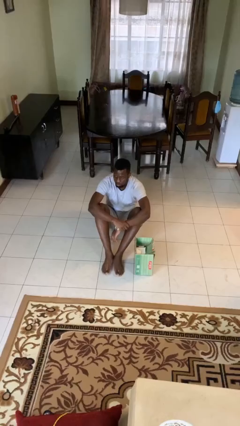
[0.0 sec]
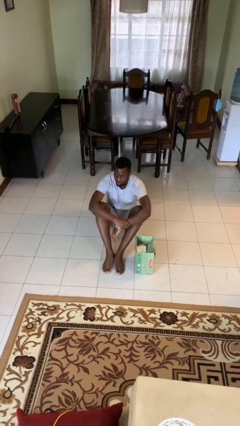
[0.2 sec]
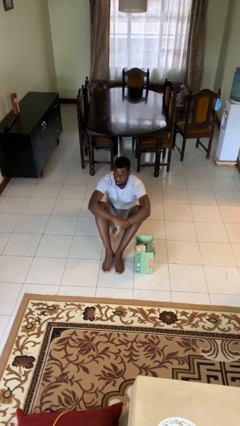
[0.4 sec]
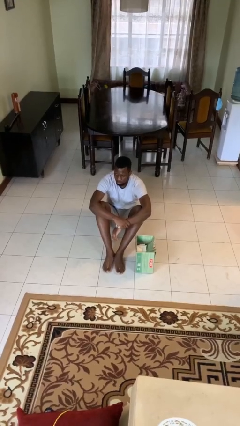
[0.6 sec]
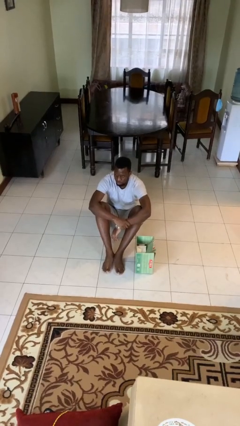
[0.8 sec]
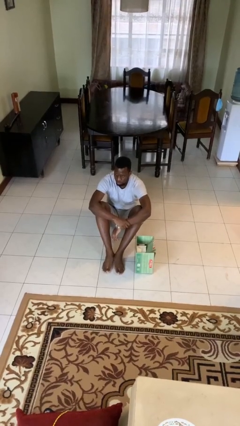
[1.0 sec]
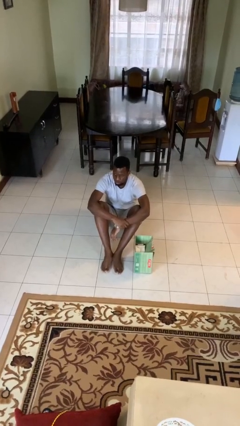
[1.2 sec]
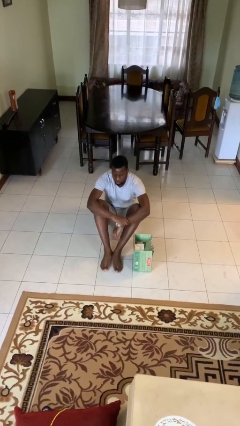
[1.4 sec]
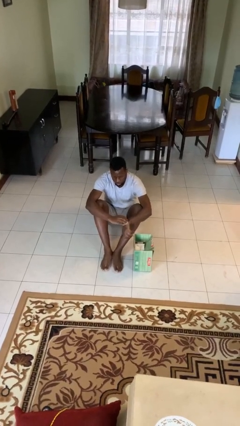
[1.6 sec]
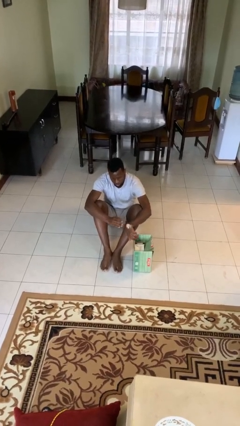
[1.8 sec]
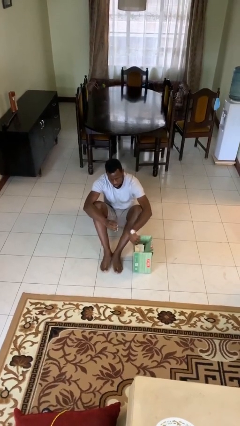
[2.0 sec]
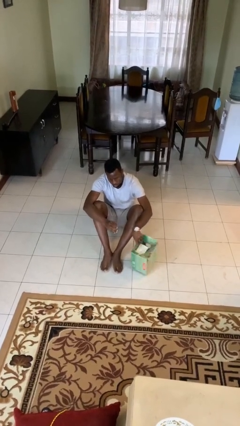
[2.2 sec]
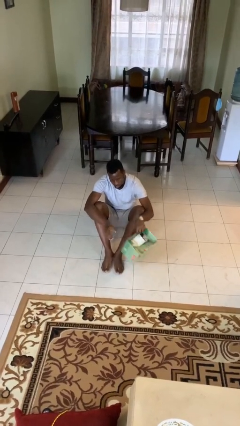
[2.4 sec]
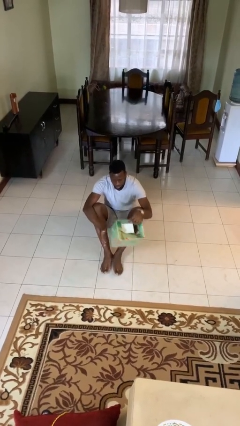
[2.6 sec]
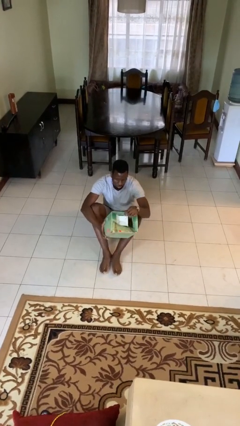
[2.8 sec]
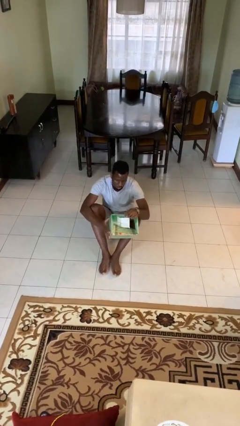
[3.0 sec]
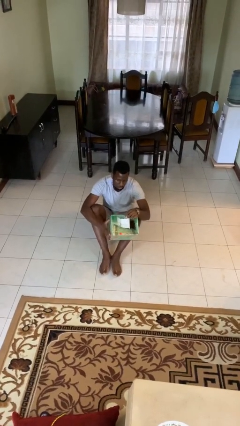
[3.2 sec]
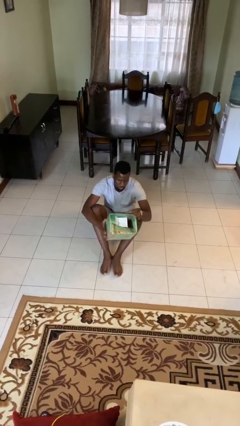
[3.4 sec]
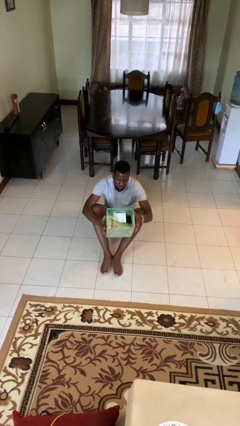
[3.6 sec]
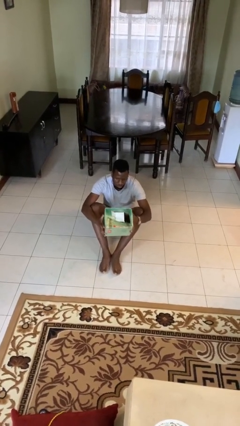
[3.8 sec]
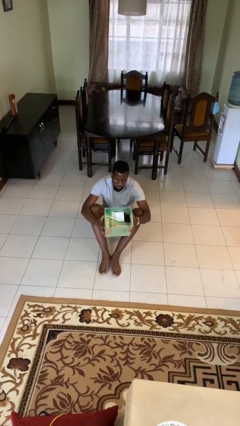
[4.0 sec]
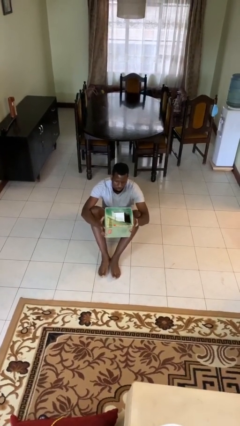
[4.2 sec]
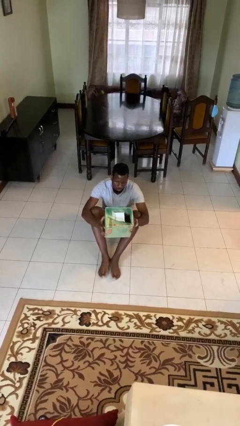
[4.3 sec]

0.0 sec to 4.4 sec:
person picks up object from floor

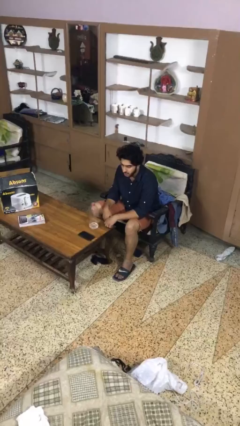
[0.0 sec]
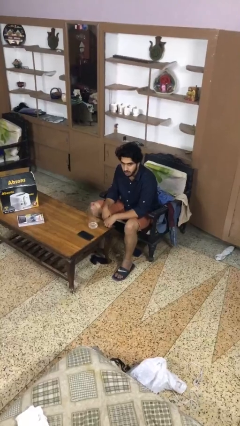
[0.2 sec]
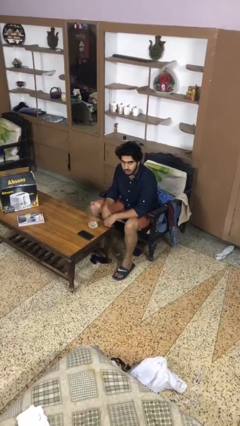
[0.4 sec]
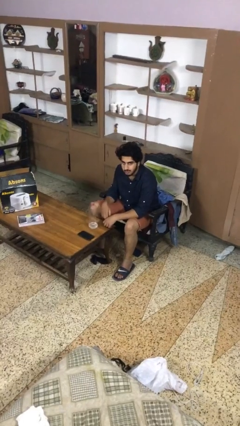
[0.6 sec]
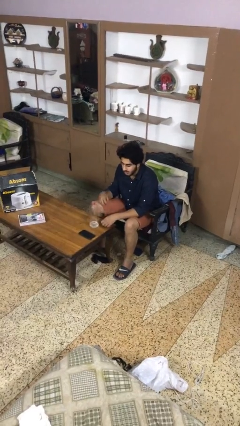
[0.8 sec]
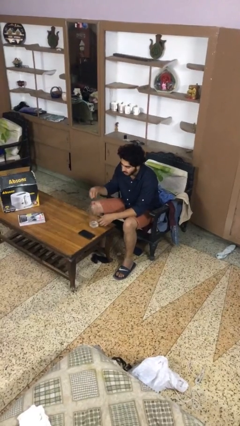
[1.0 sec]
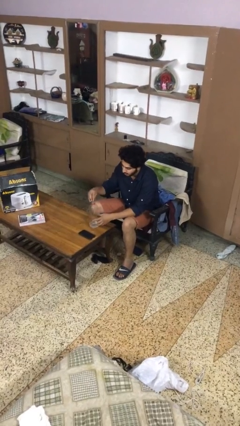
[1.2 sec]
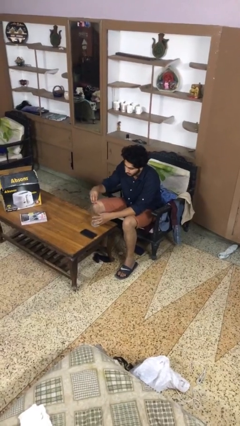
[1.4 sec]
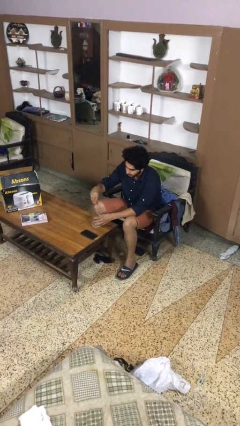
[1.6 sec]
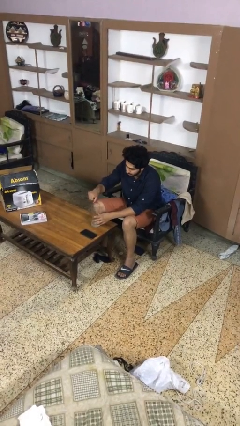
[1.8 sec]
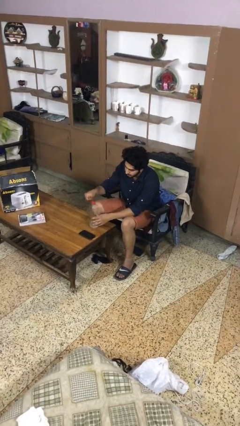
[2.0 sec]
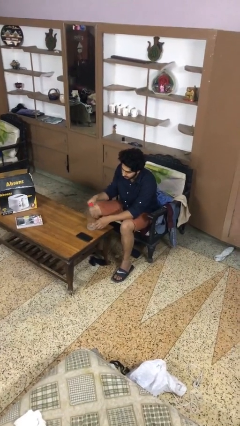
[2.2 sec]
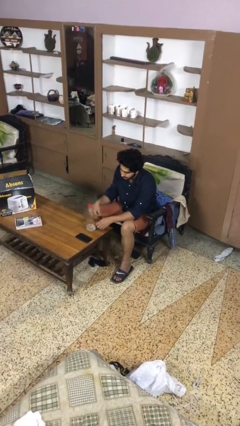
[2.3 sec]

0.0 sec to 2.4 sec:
person screws lid to bottle

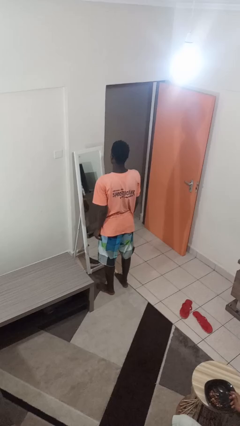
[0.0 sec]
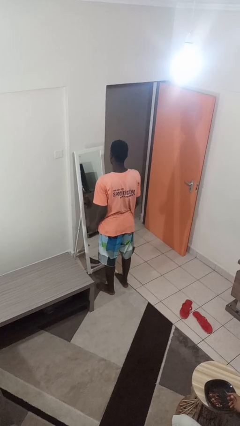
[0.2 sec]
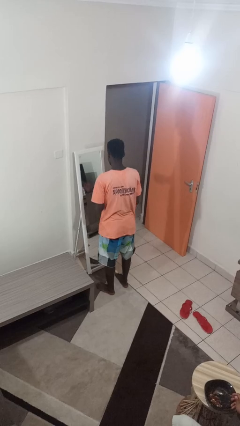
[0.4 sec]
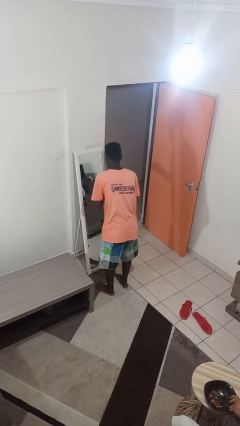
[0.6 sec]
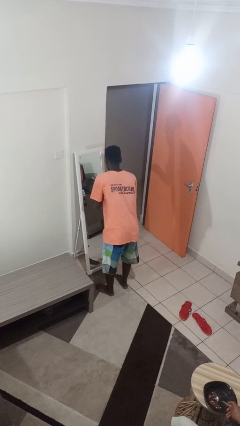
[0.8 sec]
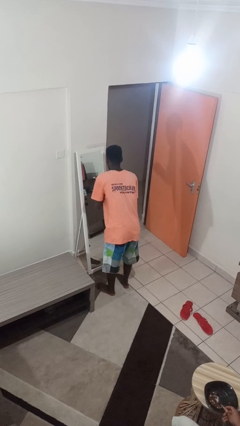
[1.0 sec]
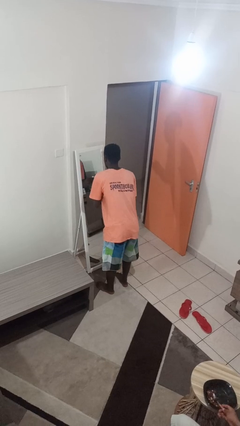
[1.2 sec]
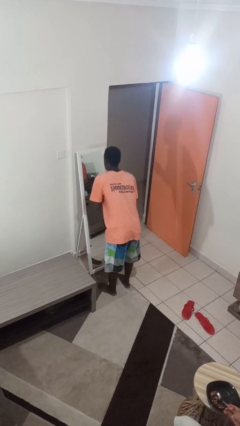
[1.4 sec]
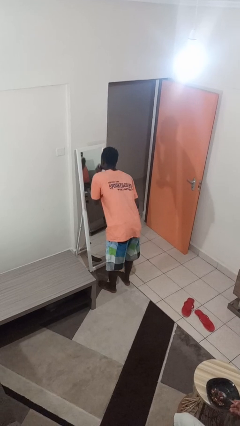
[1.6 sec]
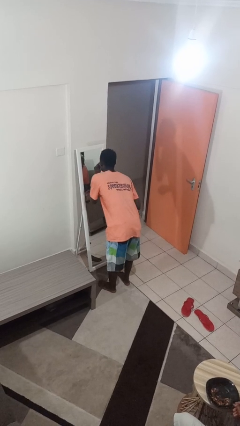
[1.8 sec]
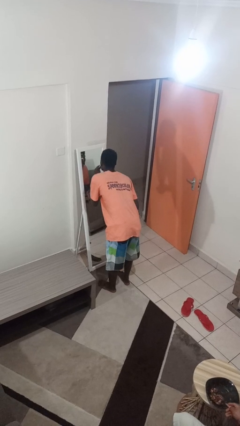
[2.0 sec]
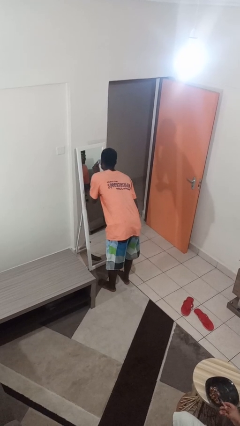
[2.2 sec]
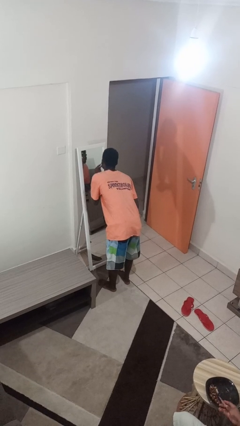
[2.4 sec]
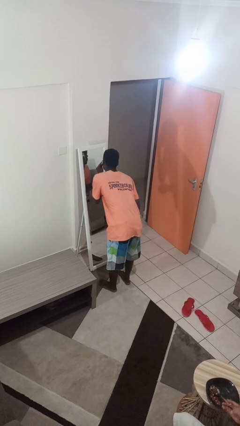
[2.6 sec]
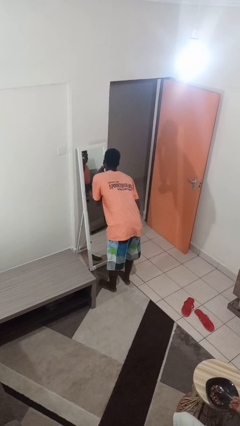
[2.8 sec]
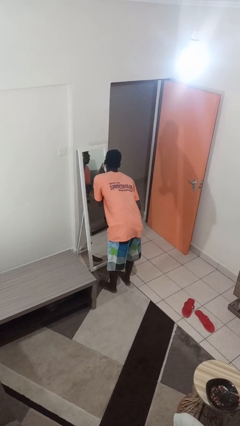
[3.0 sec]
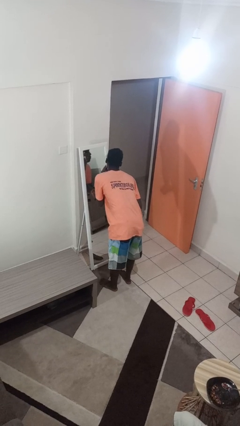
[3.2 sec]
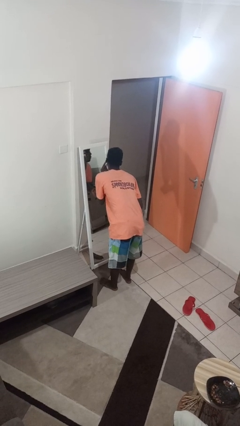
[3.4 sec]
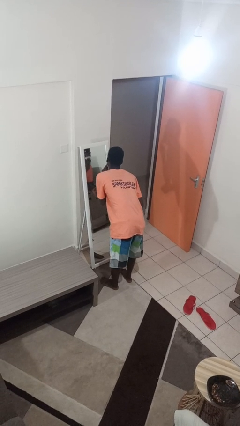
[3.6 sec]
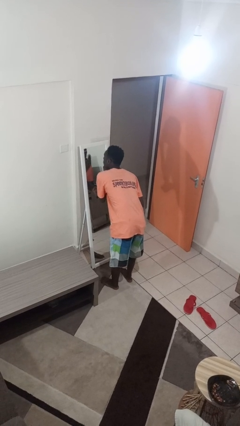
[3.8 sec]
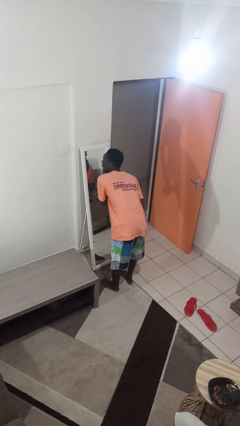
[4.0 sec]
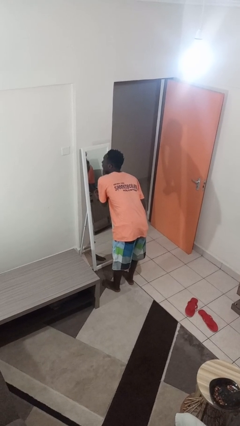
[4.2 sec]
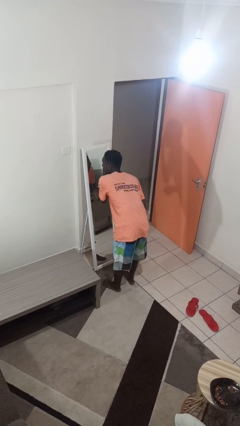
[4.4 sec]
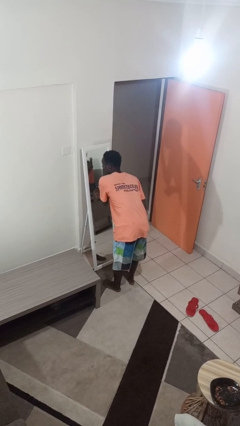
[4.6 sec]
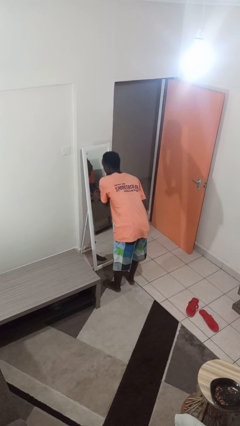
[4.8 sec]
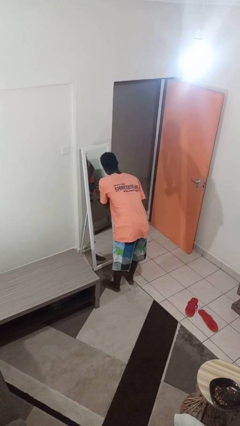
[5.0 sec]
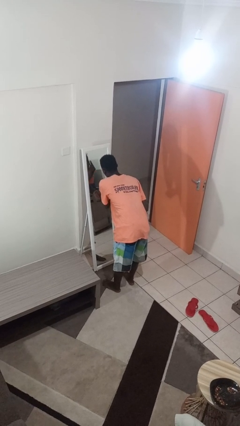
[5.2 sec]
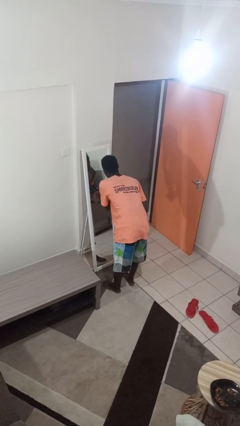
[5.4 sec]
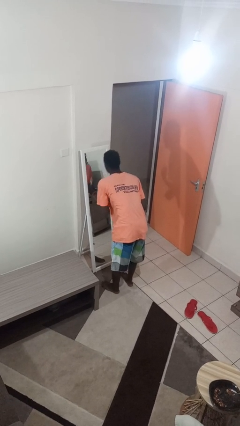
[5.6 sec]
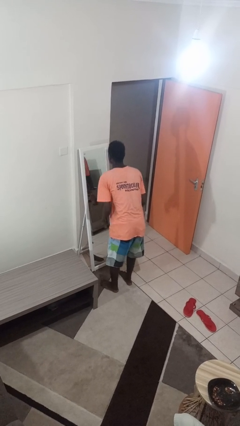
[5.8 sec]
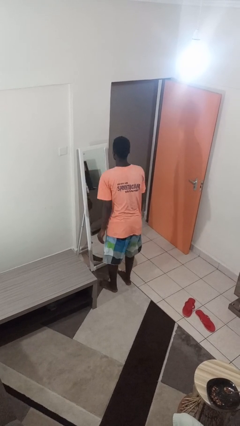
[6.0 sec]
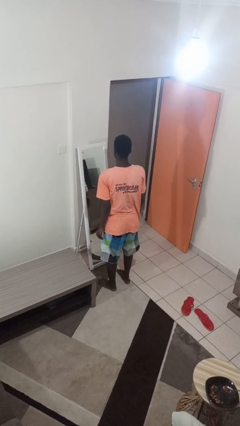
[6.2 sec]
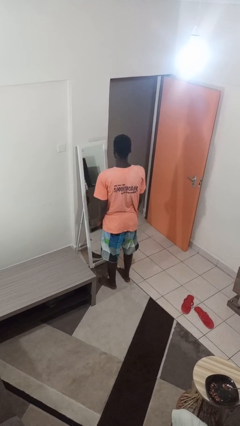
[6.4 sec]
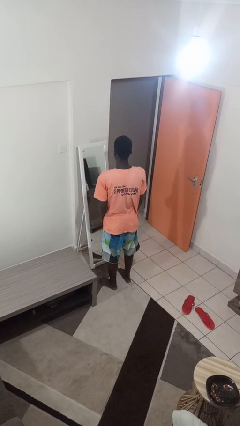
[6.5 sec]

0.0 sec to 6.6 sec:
person applies foundation makeup

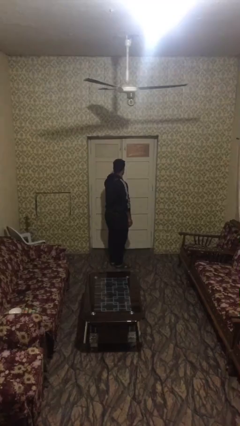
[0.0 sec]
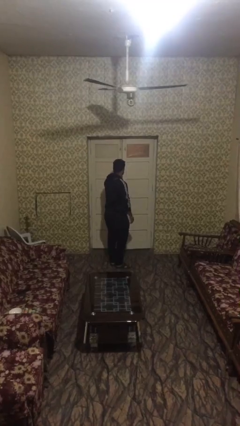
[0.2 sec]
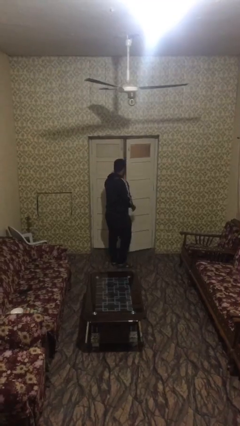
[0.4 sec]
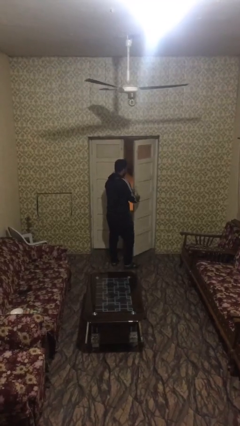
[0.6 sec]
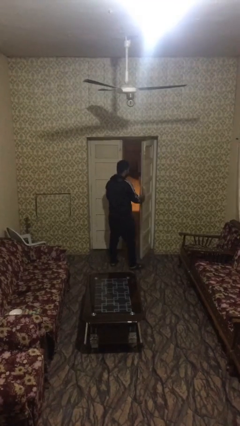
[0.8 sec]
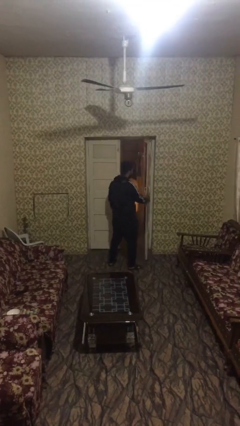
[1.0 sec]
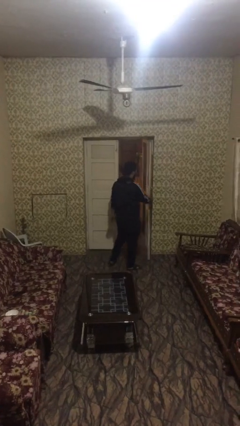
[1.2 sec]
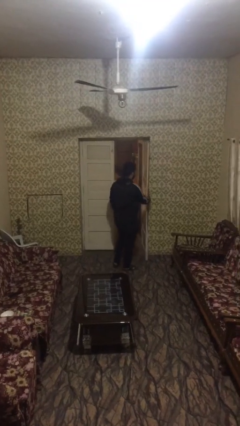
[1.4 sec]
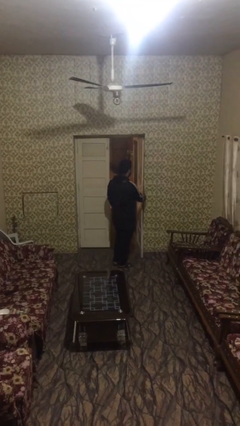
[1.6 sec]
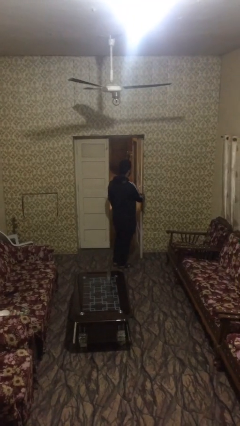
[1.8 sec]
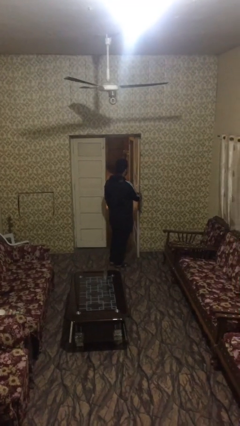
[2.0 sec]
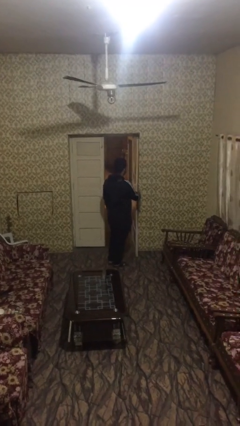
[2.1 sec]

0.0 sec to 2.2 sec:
person opens facility door

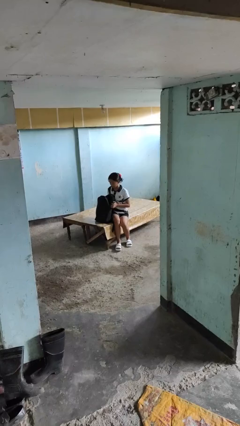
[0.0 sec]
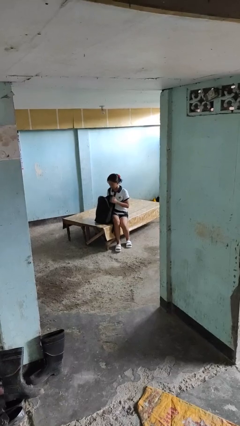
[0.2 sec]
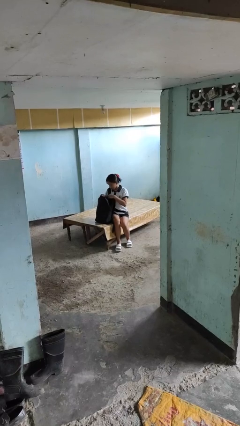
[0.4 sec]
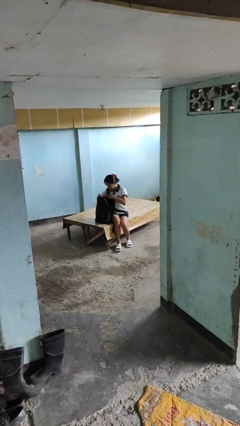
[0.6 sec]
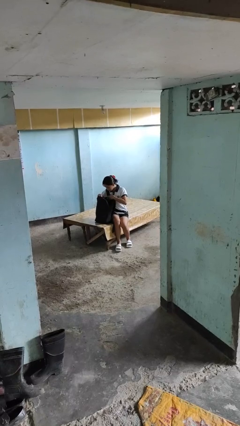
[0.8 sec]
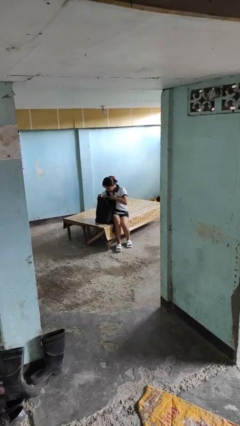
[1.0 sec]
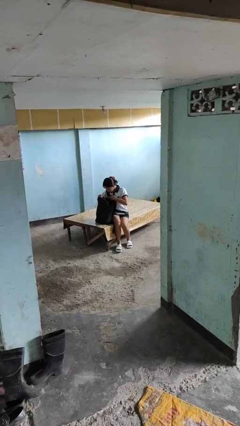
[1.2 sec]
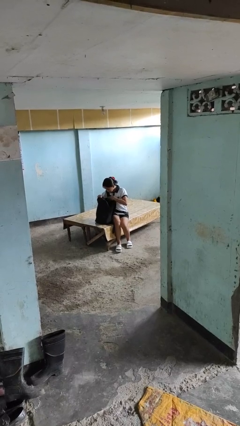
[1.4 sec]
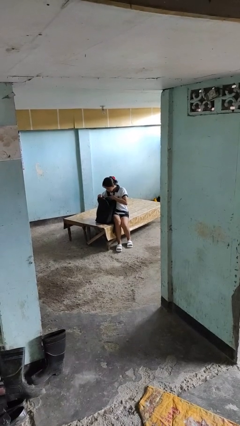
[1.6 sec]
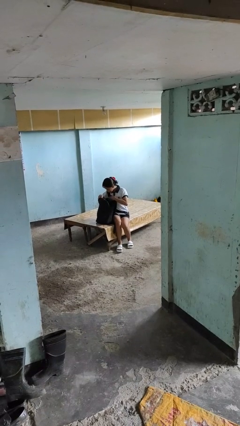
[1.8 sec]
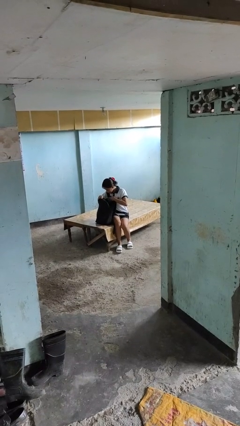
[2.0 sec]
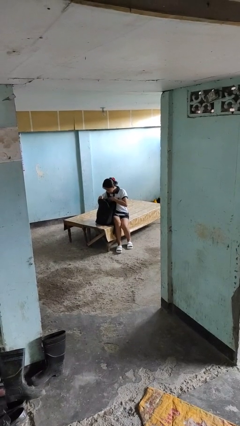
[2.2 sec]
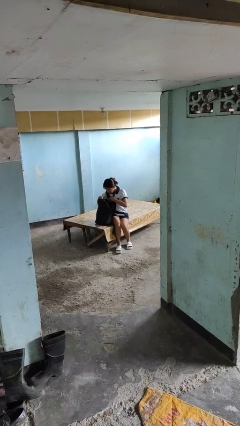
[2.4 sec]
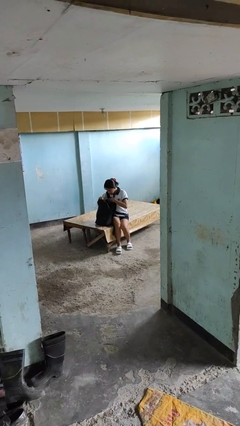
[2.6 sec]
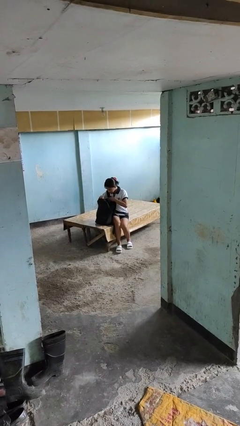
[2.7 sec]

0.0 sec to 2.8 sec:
person searches in backpack
